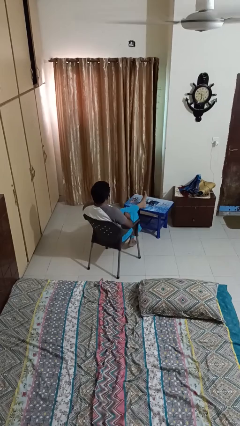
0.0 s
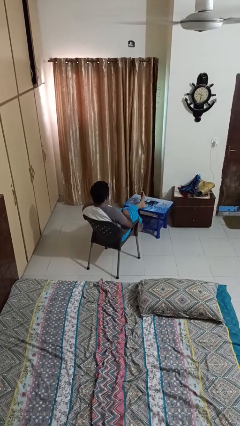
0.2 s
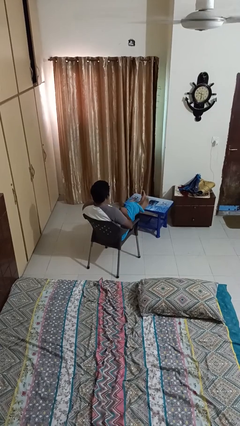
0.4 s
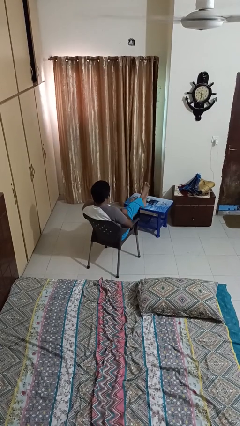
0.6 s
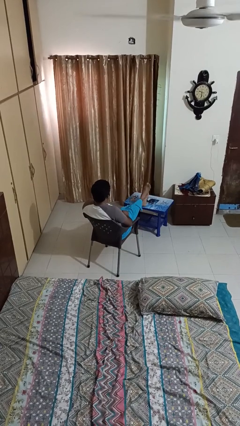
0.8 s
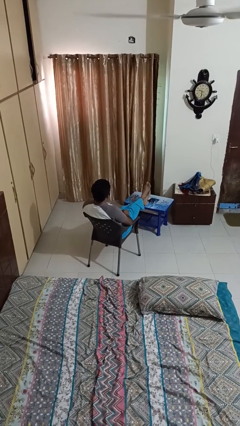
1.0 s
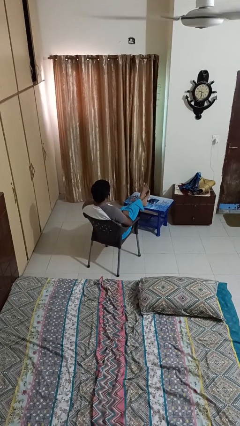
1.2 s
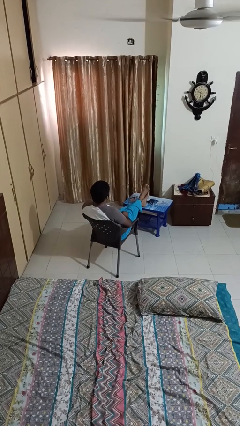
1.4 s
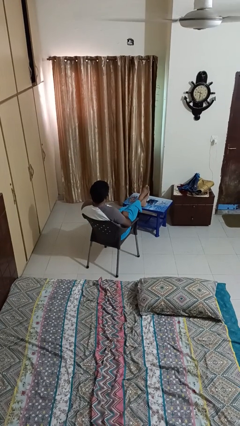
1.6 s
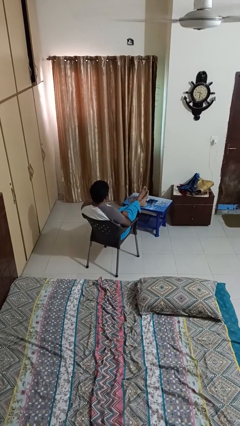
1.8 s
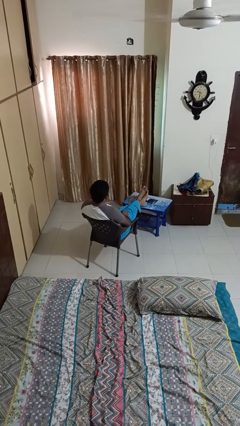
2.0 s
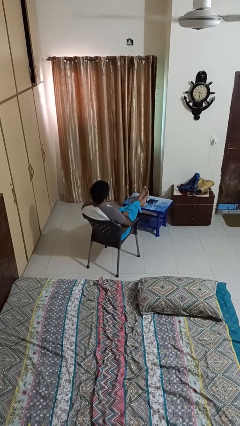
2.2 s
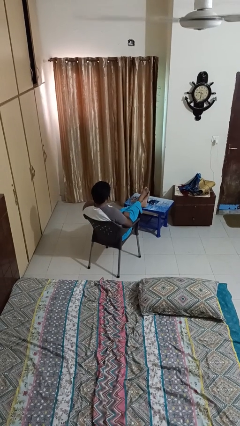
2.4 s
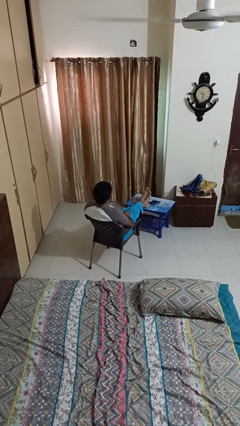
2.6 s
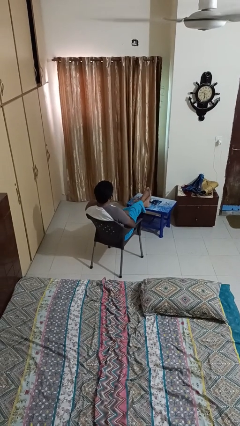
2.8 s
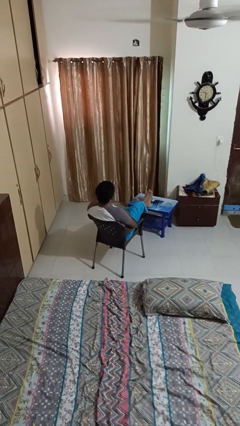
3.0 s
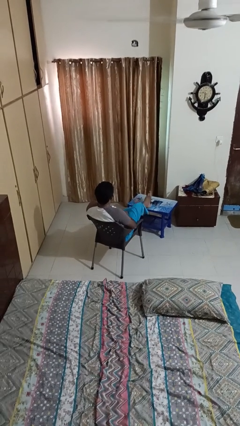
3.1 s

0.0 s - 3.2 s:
person puts feet up

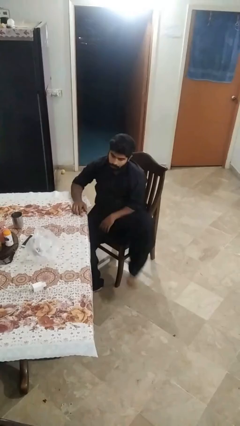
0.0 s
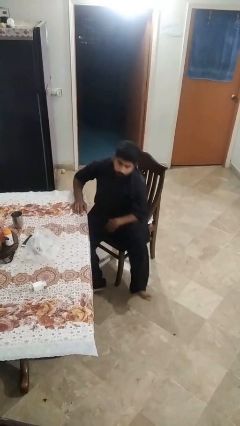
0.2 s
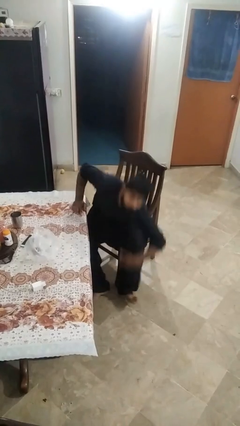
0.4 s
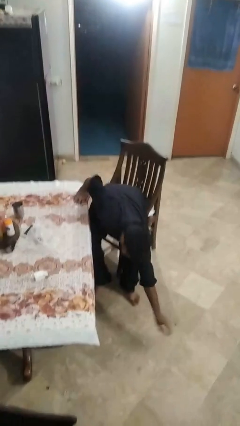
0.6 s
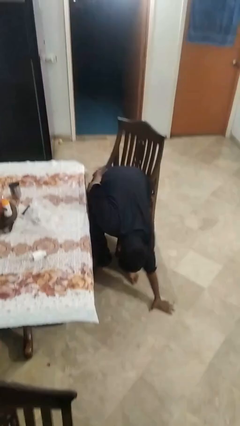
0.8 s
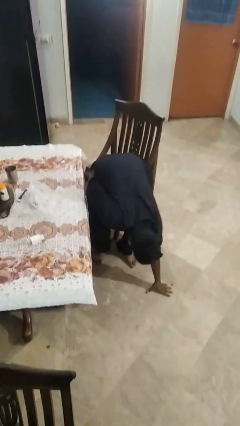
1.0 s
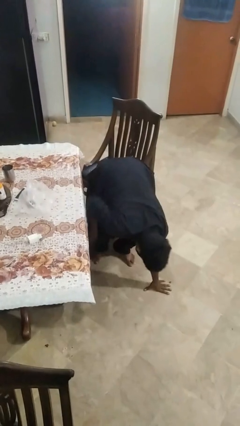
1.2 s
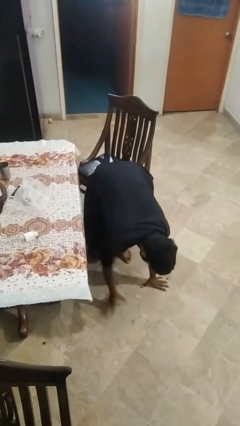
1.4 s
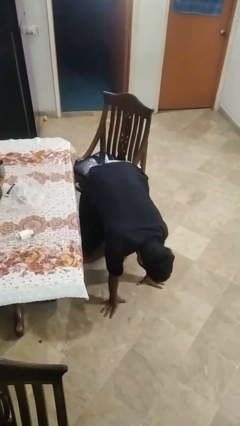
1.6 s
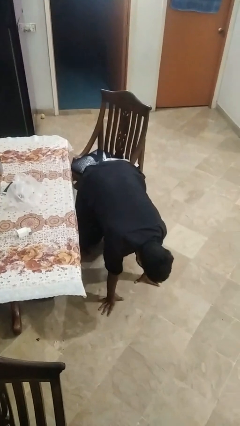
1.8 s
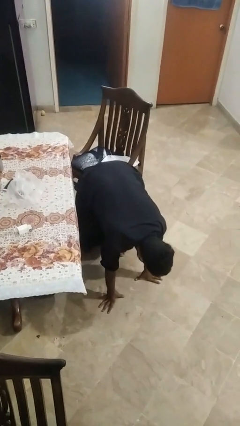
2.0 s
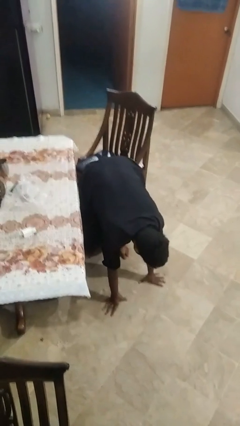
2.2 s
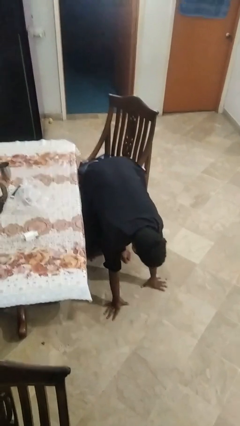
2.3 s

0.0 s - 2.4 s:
person falls from chair

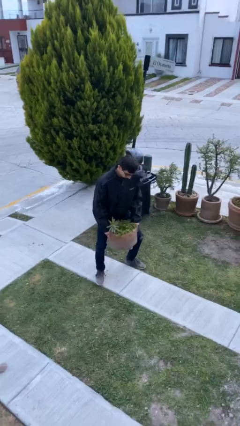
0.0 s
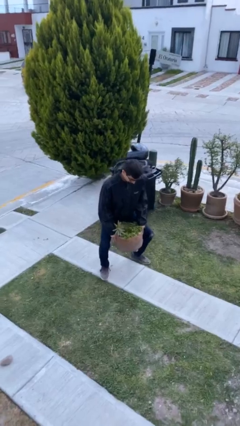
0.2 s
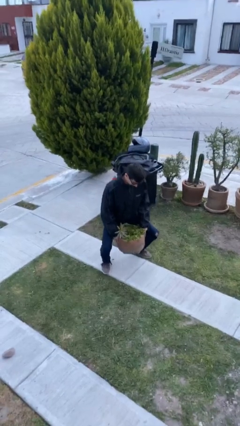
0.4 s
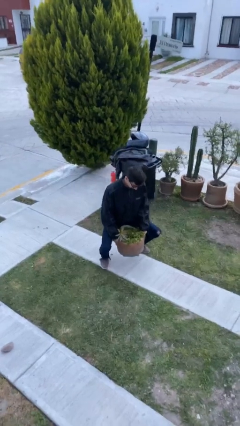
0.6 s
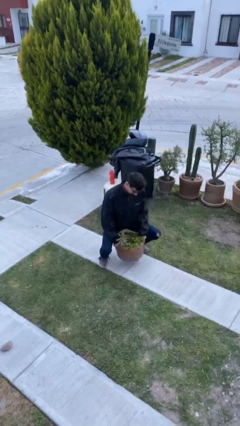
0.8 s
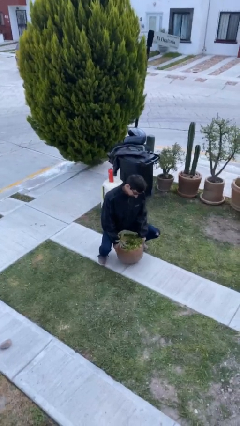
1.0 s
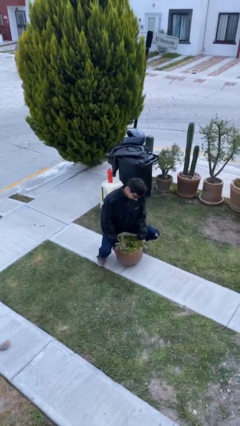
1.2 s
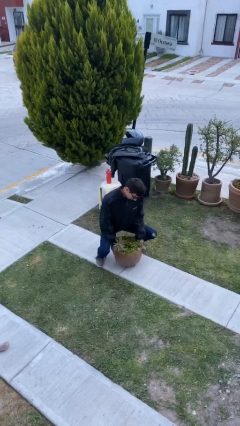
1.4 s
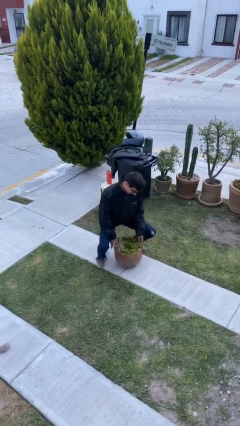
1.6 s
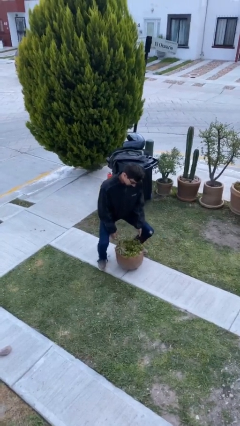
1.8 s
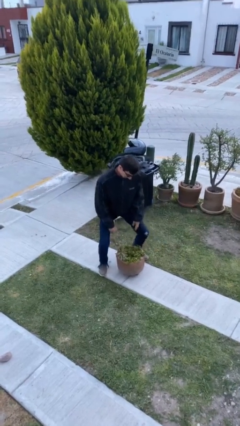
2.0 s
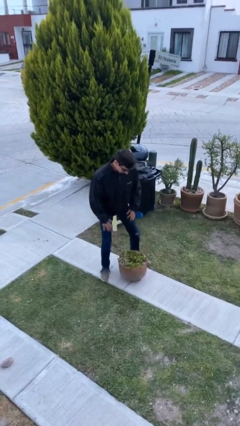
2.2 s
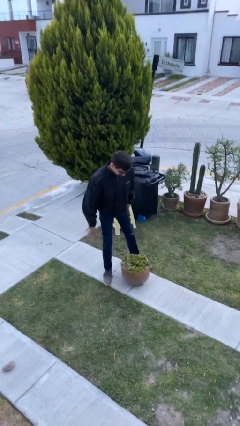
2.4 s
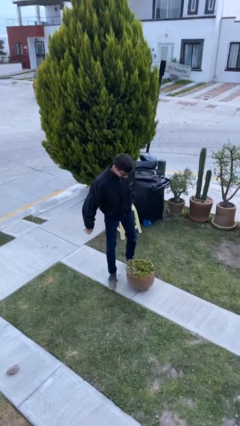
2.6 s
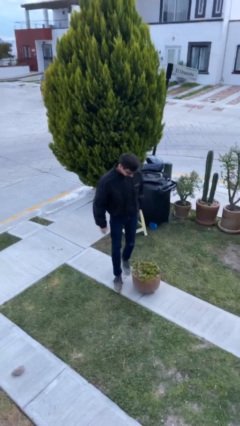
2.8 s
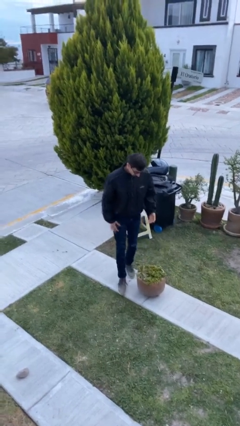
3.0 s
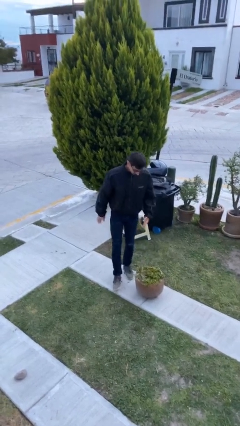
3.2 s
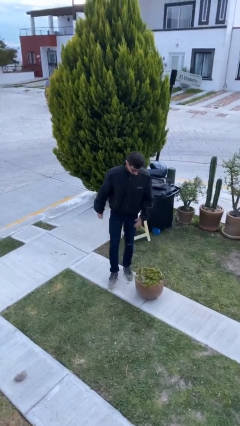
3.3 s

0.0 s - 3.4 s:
person puts down object on floor

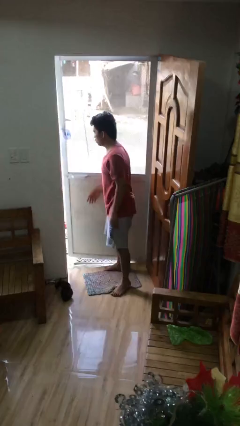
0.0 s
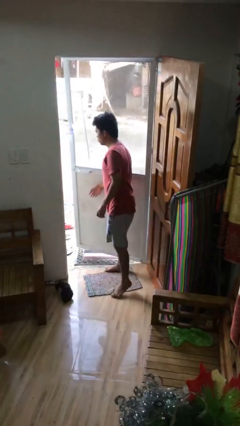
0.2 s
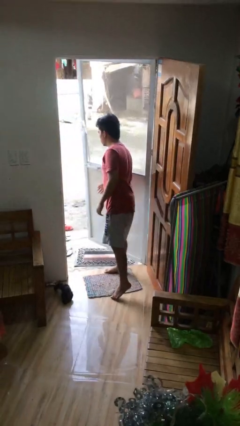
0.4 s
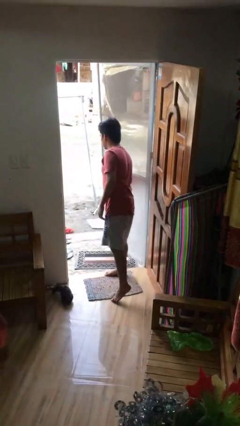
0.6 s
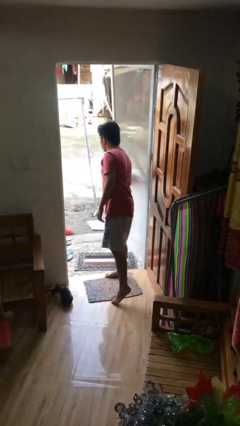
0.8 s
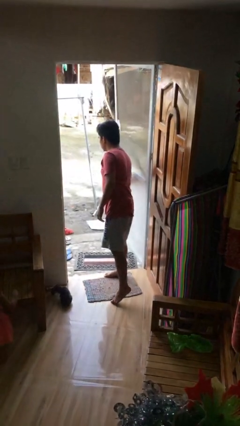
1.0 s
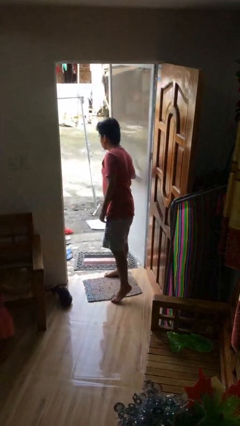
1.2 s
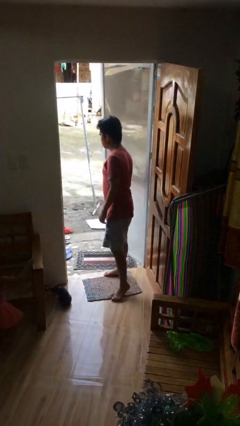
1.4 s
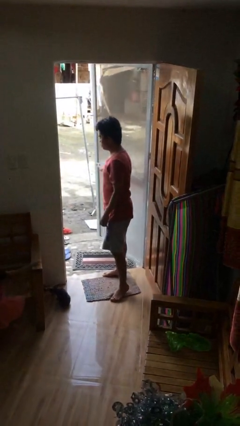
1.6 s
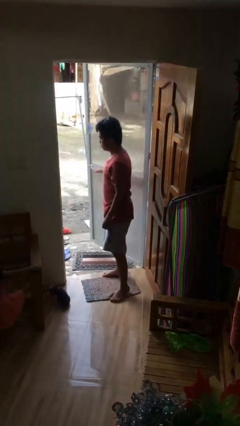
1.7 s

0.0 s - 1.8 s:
person opens facility door

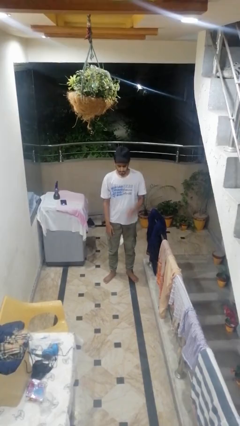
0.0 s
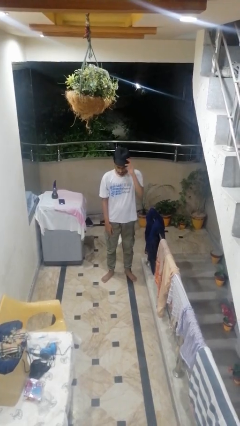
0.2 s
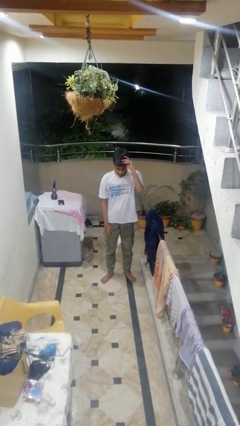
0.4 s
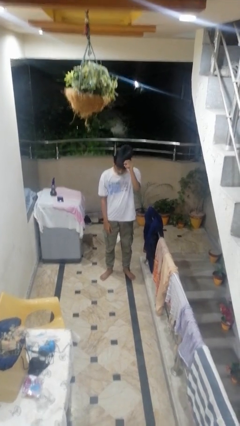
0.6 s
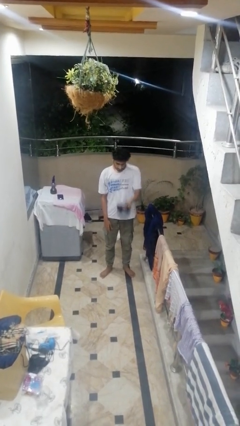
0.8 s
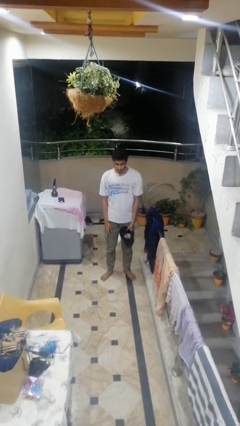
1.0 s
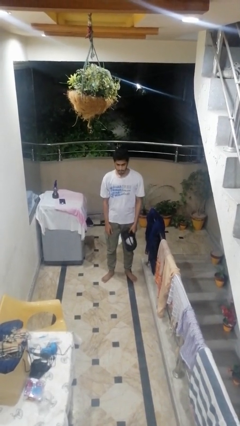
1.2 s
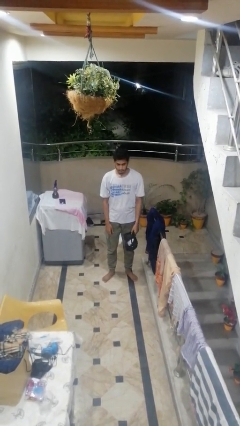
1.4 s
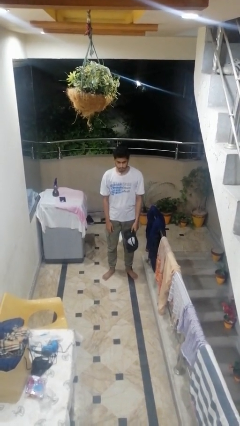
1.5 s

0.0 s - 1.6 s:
person takes off hat

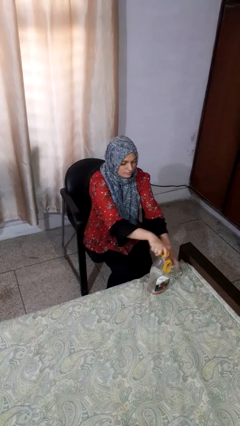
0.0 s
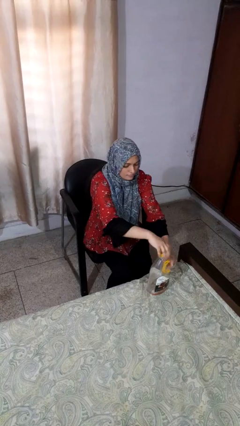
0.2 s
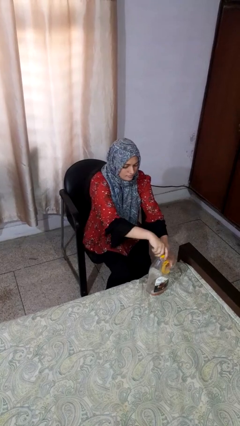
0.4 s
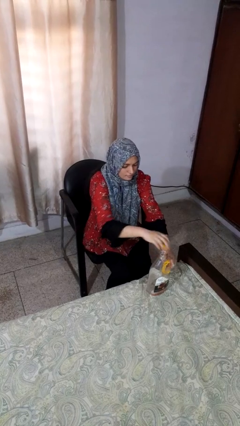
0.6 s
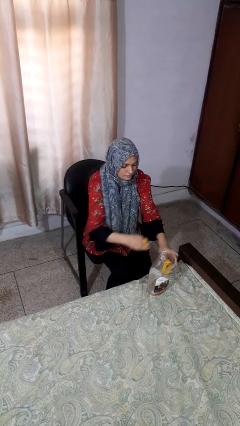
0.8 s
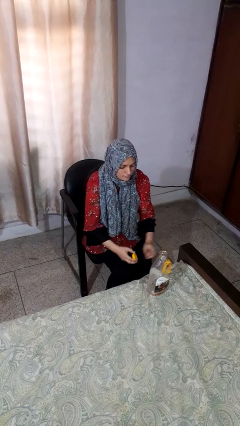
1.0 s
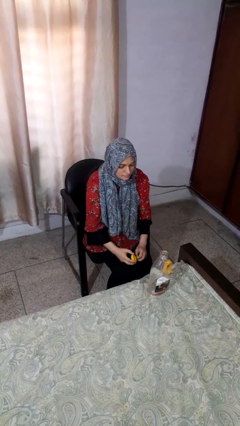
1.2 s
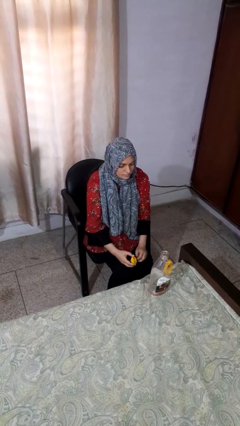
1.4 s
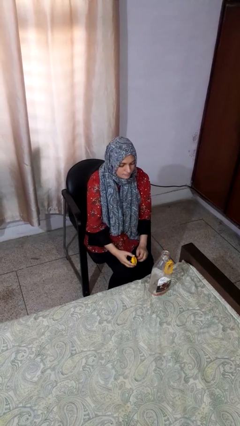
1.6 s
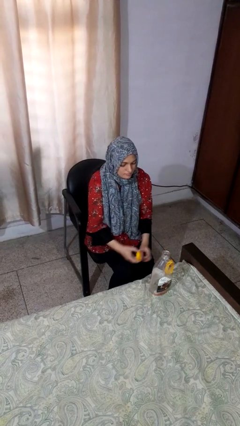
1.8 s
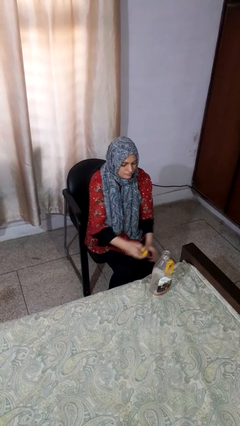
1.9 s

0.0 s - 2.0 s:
person unscrews lid from bottle

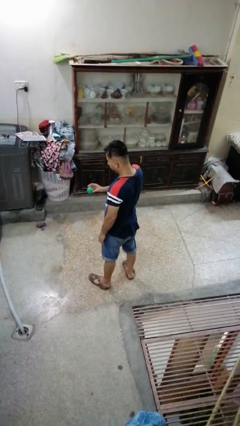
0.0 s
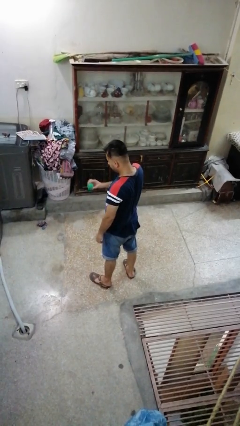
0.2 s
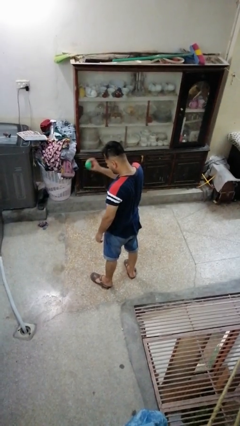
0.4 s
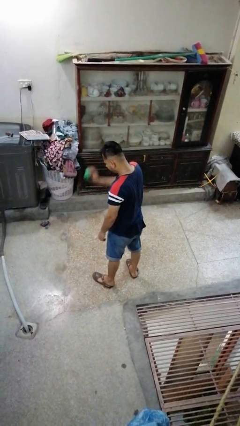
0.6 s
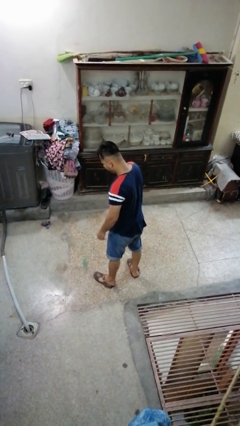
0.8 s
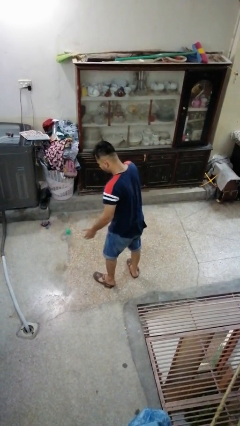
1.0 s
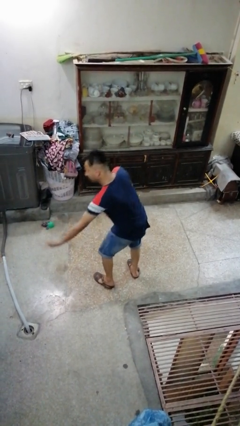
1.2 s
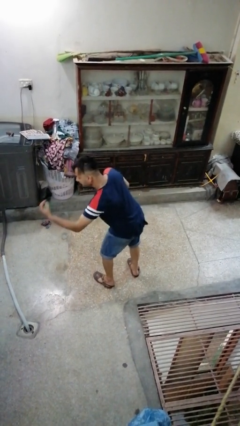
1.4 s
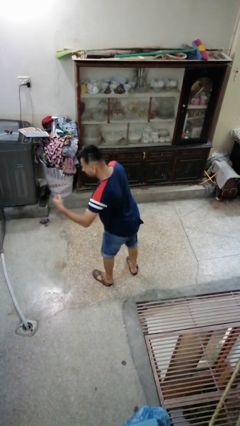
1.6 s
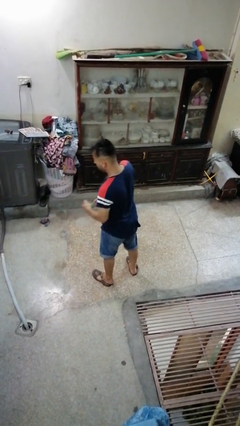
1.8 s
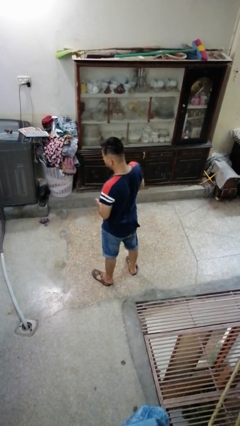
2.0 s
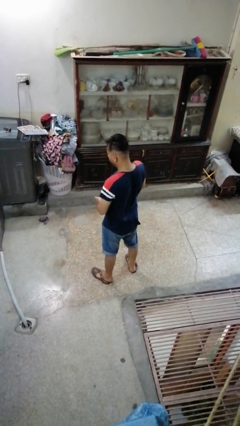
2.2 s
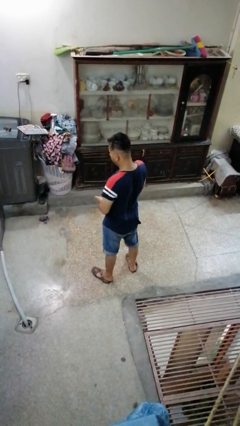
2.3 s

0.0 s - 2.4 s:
person bounces ball on floor

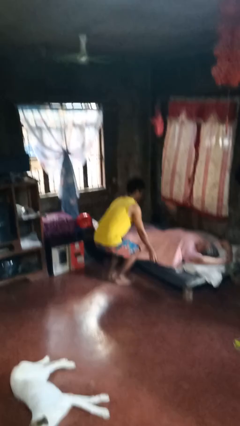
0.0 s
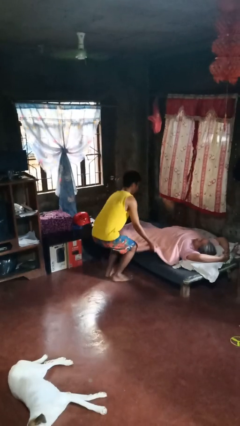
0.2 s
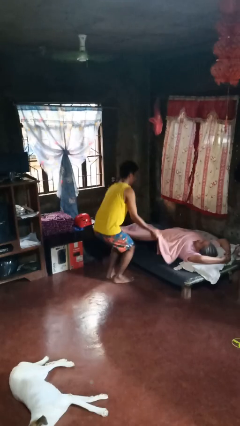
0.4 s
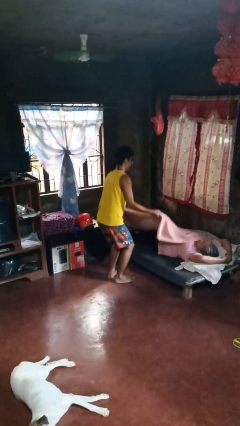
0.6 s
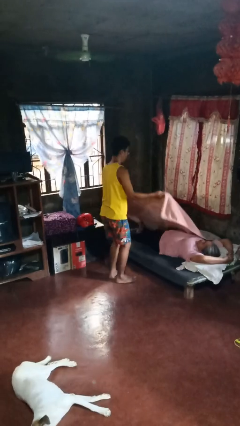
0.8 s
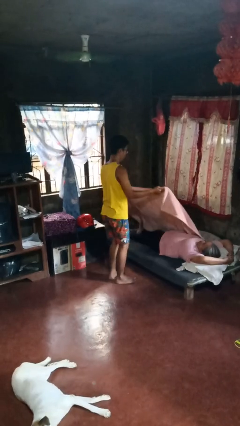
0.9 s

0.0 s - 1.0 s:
person uncovers friend with blanket
